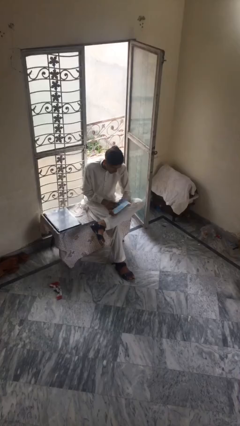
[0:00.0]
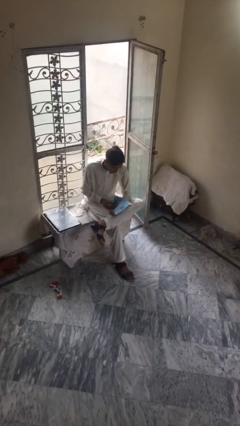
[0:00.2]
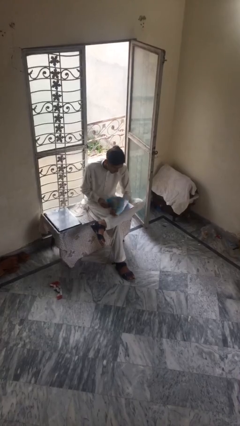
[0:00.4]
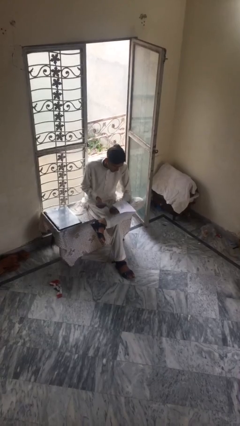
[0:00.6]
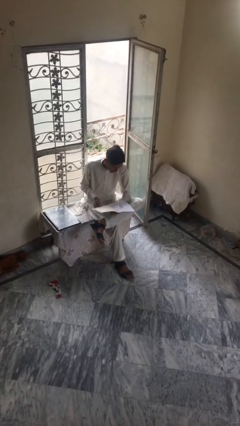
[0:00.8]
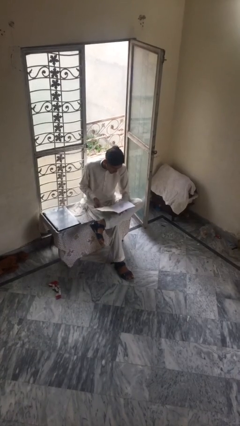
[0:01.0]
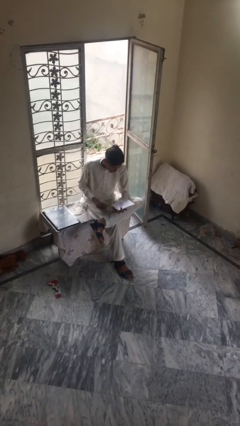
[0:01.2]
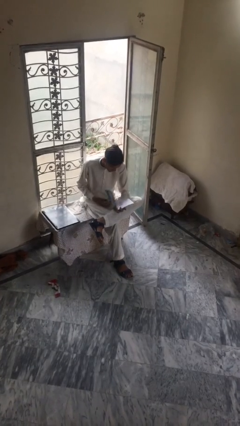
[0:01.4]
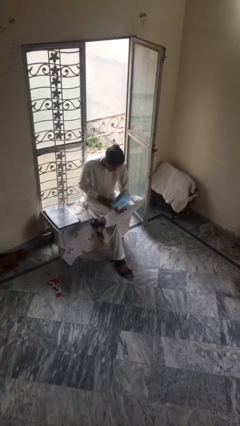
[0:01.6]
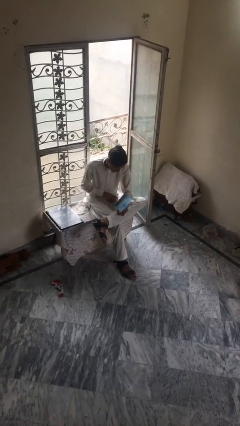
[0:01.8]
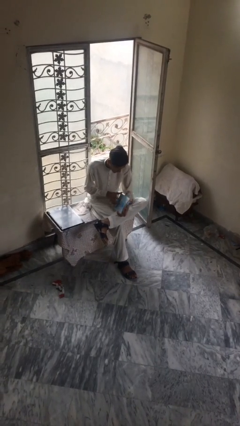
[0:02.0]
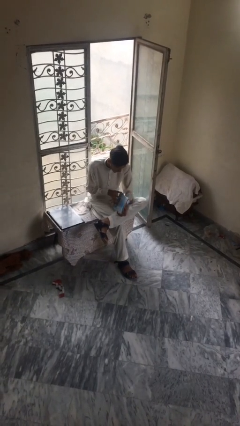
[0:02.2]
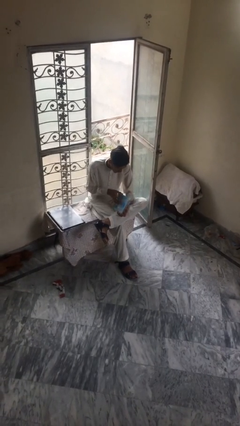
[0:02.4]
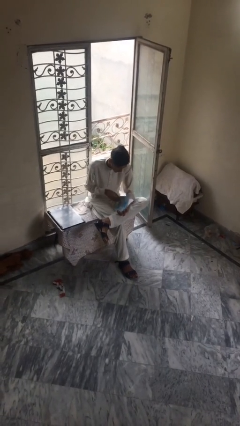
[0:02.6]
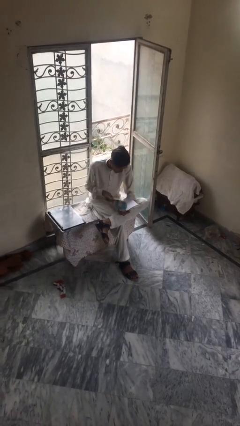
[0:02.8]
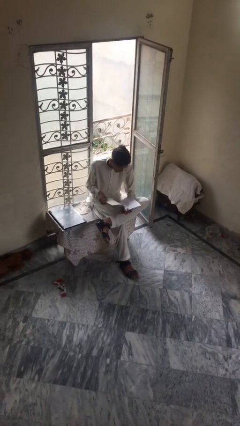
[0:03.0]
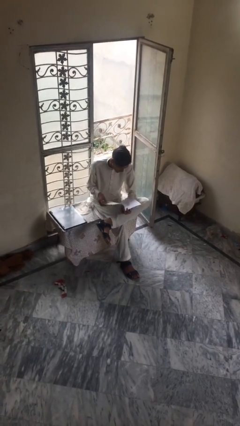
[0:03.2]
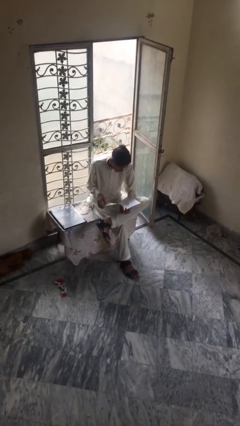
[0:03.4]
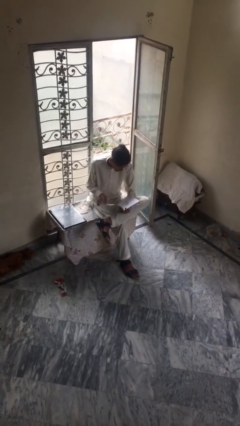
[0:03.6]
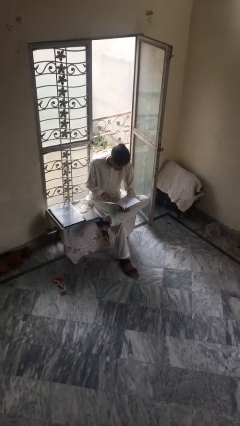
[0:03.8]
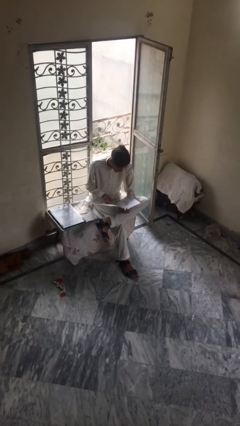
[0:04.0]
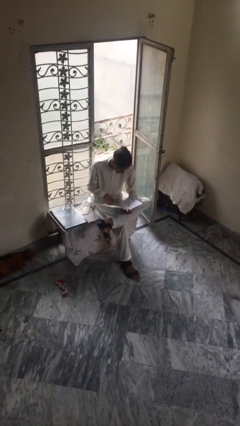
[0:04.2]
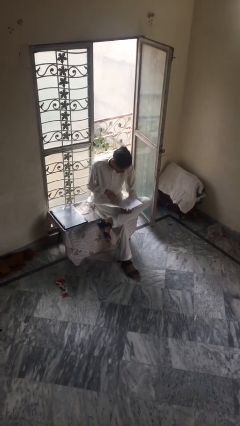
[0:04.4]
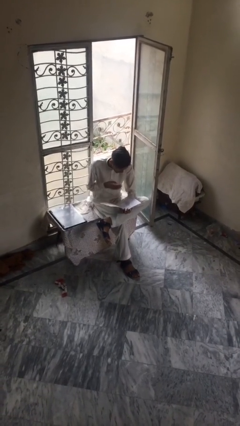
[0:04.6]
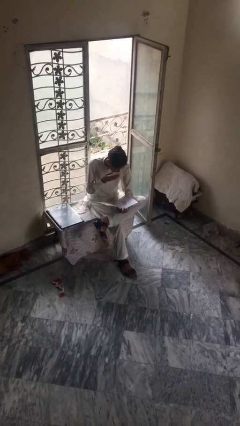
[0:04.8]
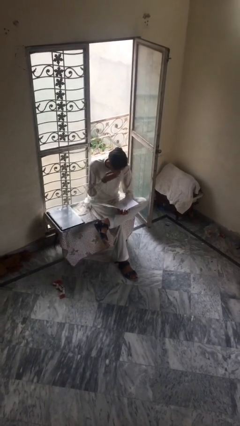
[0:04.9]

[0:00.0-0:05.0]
person reads document

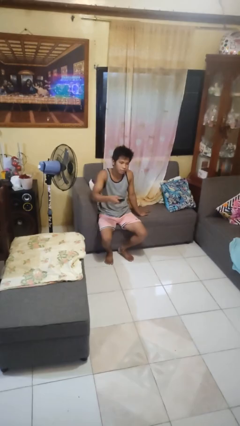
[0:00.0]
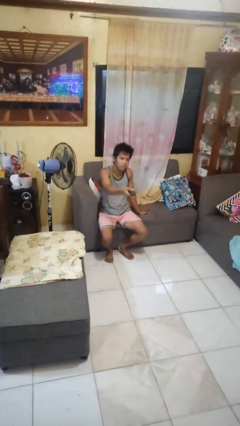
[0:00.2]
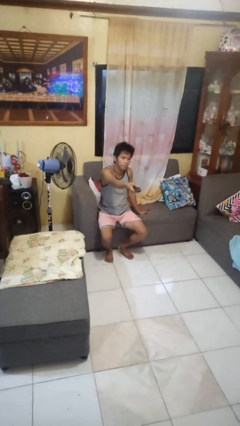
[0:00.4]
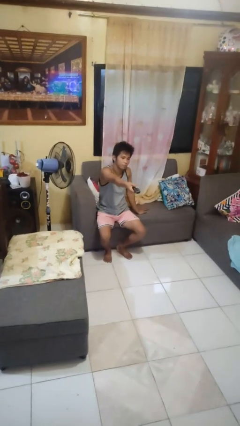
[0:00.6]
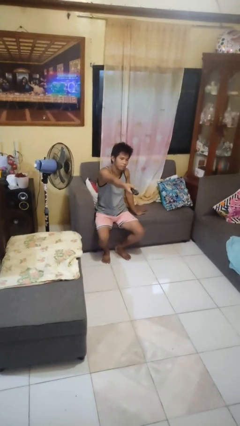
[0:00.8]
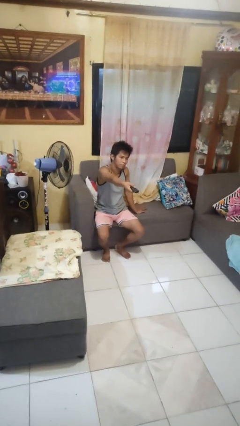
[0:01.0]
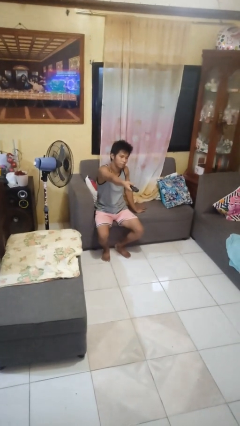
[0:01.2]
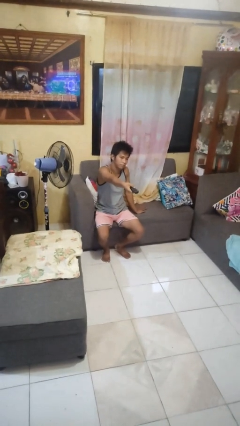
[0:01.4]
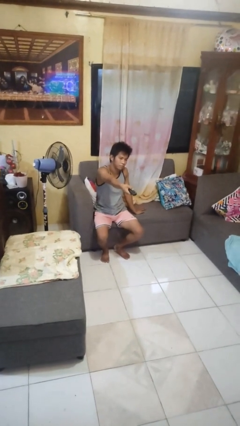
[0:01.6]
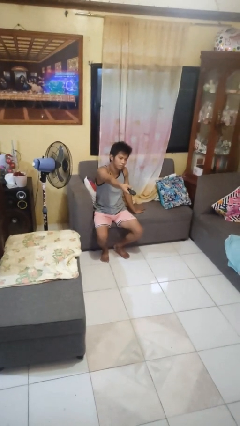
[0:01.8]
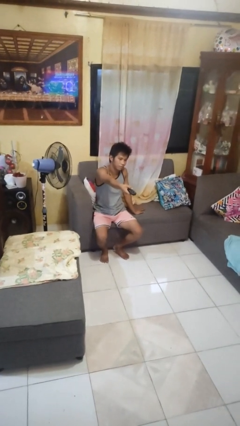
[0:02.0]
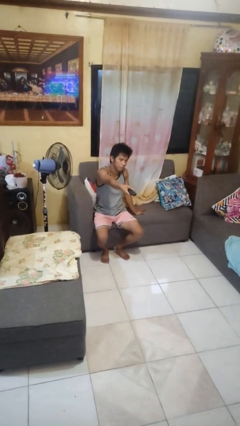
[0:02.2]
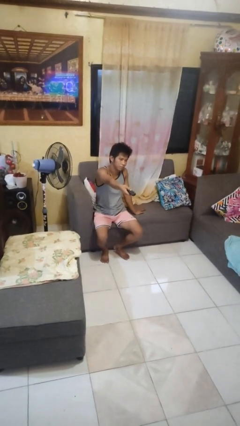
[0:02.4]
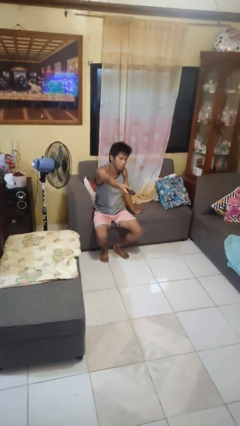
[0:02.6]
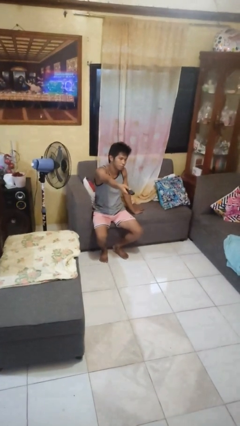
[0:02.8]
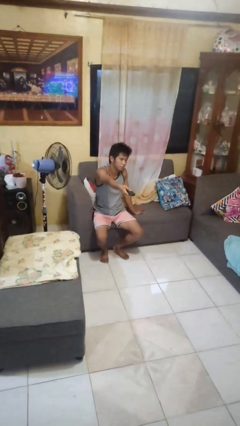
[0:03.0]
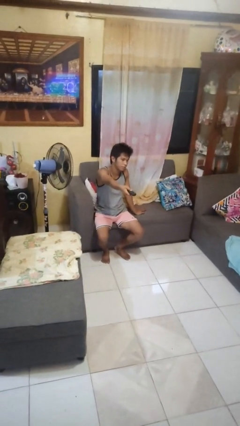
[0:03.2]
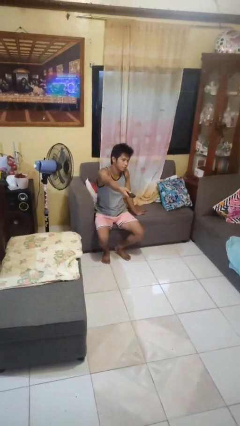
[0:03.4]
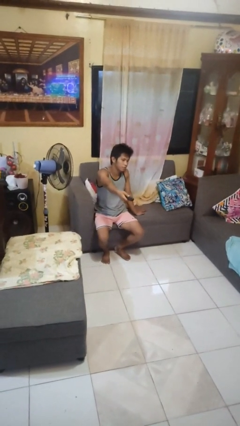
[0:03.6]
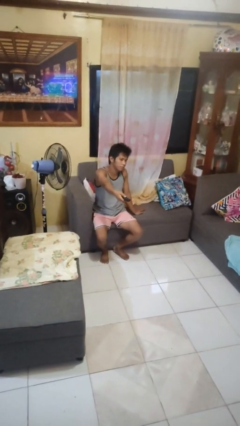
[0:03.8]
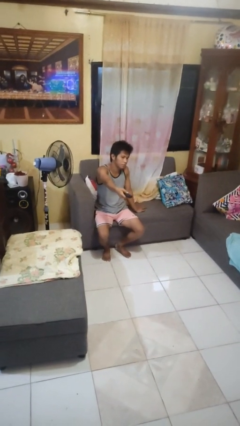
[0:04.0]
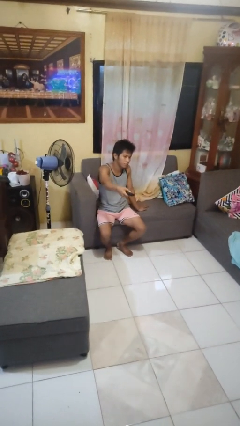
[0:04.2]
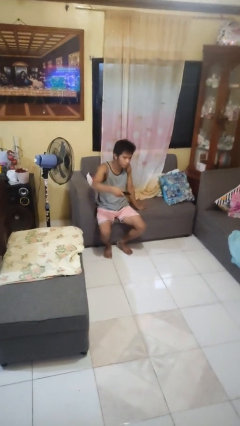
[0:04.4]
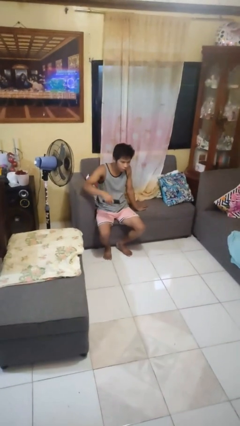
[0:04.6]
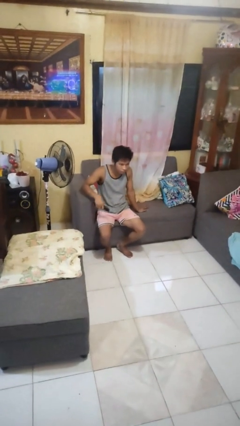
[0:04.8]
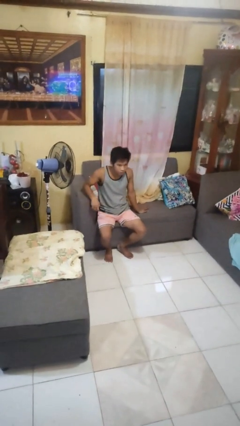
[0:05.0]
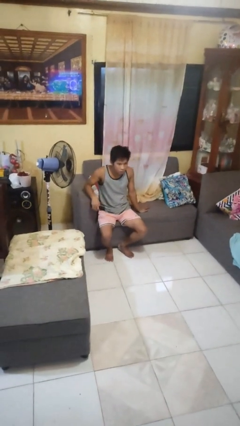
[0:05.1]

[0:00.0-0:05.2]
person uses television remote

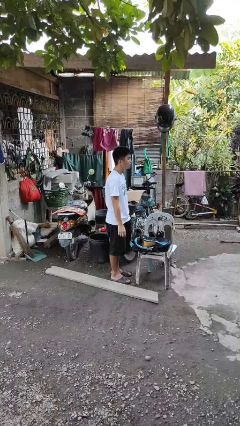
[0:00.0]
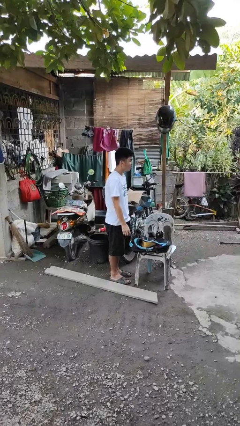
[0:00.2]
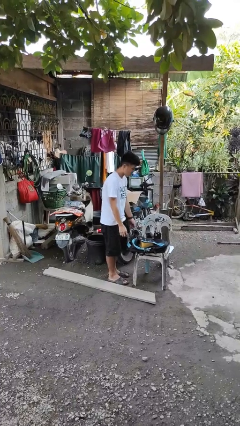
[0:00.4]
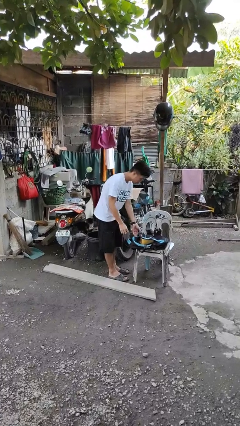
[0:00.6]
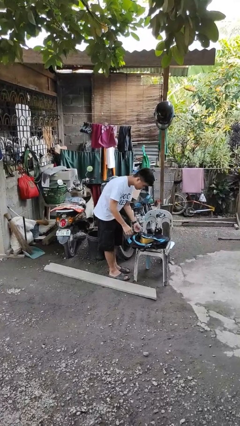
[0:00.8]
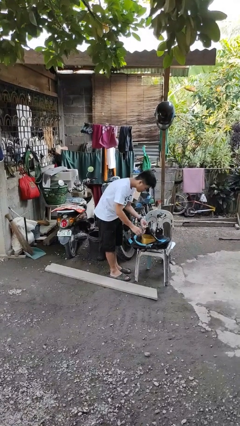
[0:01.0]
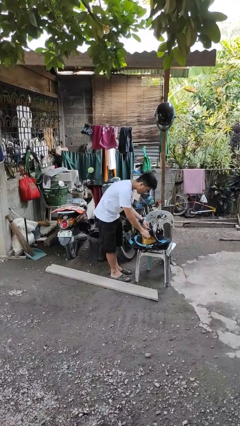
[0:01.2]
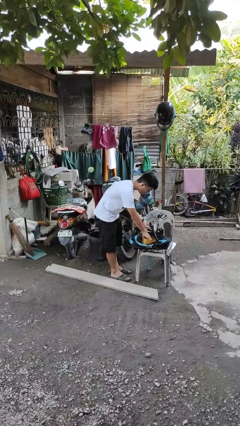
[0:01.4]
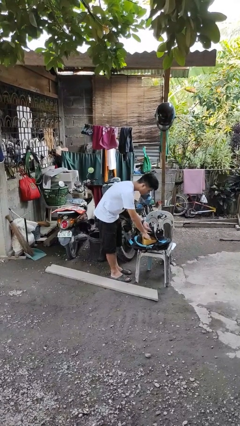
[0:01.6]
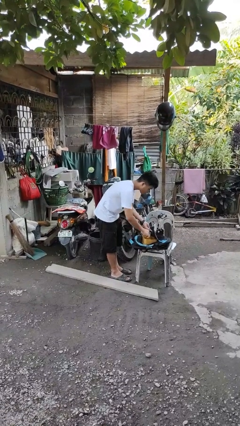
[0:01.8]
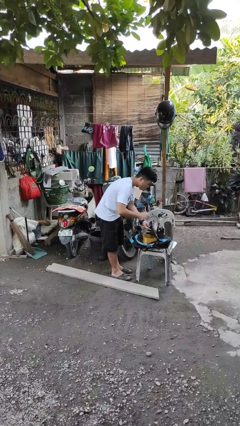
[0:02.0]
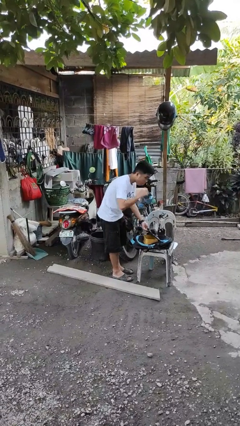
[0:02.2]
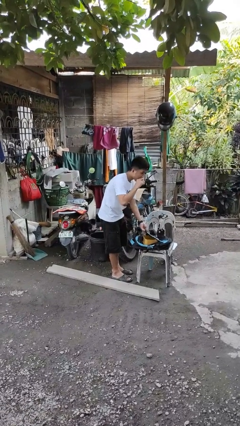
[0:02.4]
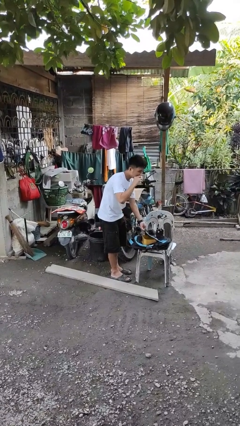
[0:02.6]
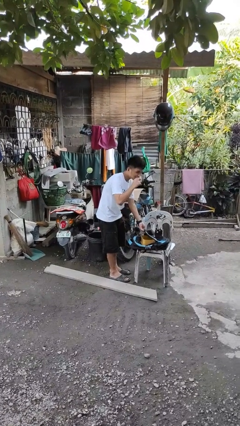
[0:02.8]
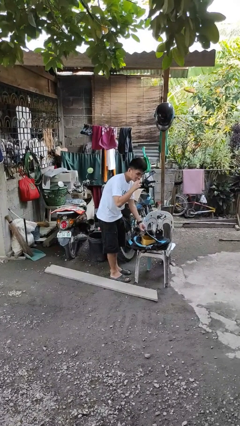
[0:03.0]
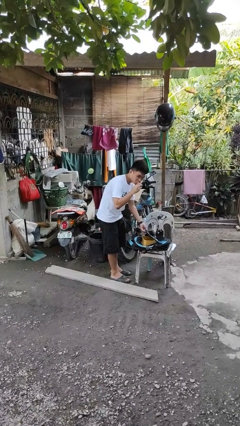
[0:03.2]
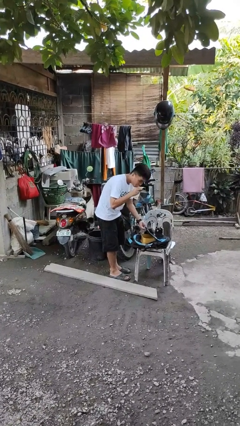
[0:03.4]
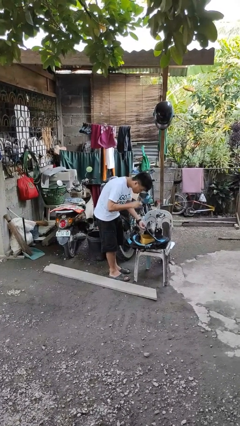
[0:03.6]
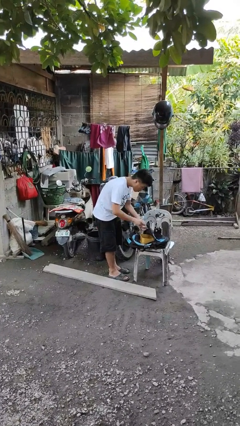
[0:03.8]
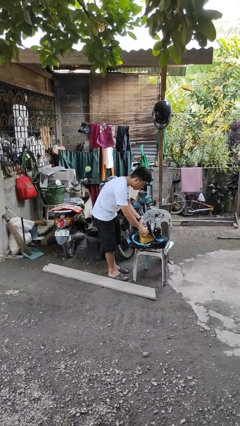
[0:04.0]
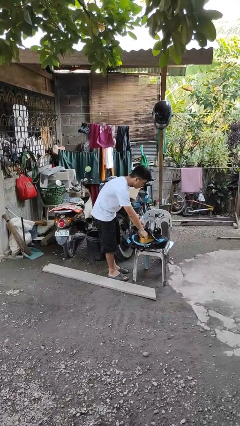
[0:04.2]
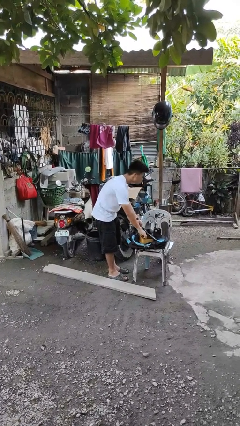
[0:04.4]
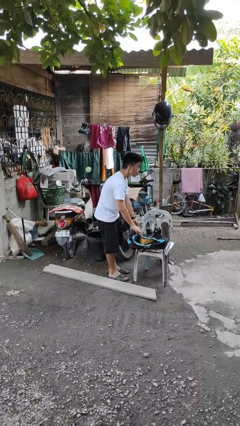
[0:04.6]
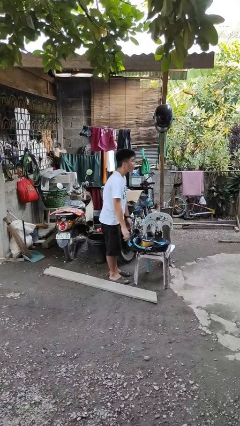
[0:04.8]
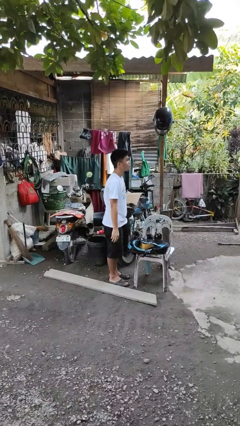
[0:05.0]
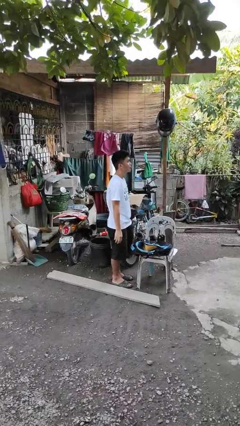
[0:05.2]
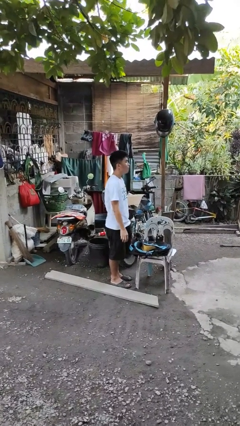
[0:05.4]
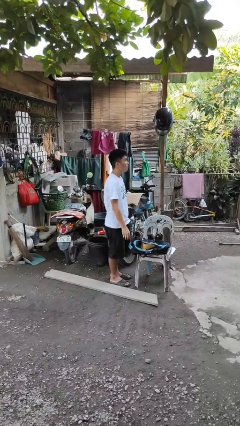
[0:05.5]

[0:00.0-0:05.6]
person eats snack from bag

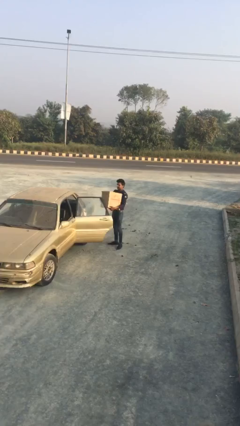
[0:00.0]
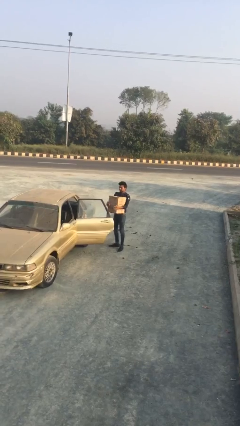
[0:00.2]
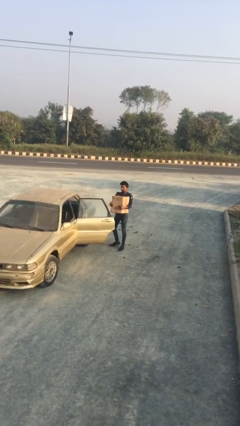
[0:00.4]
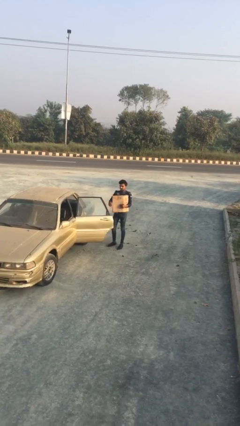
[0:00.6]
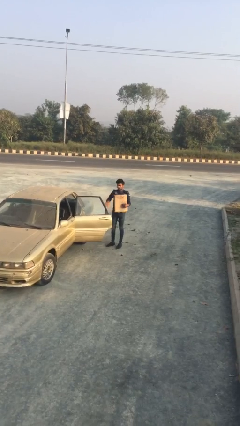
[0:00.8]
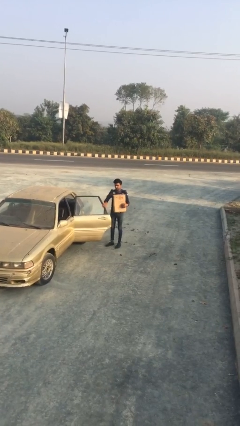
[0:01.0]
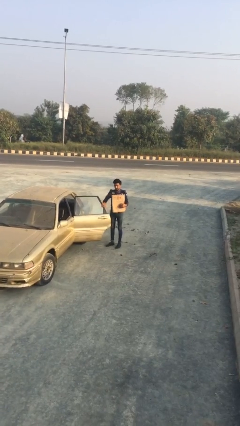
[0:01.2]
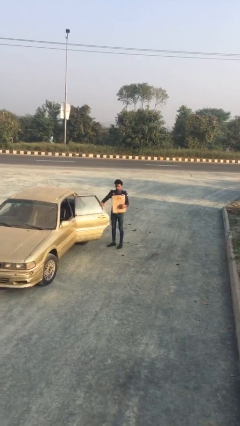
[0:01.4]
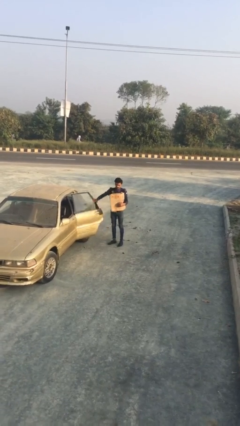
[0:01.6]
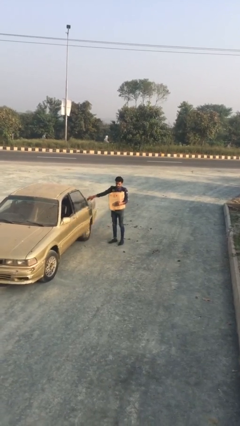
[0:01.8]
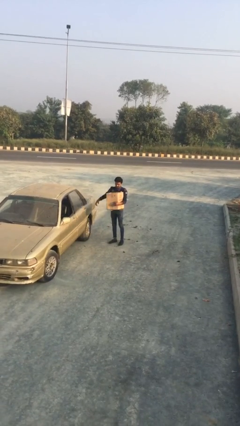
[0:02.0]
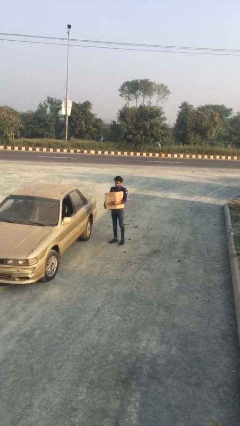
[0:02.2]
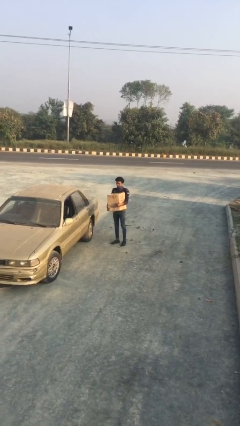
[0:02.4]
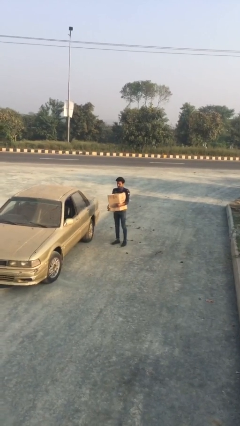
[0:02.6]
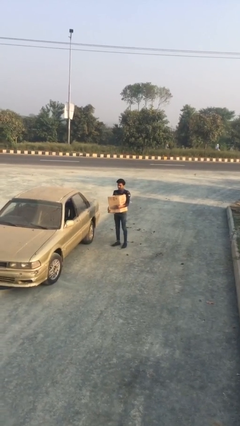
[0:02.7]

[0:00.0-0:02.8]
person closes car door
